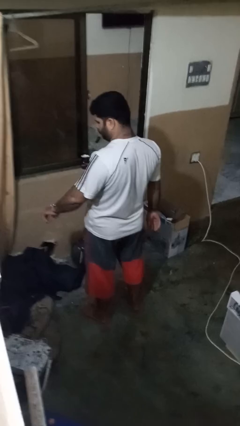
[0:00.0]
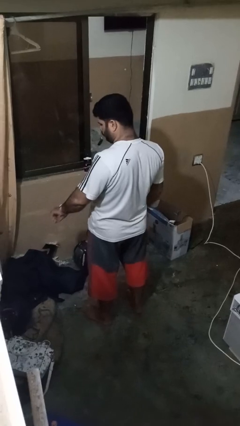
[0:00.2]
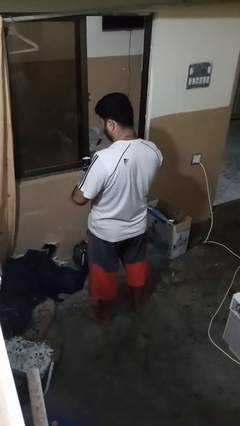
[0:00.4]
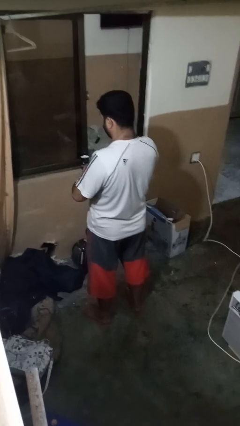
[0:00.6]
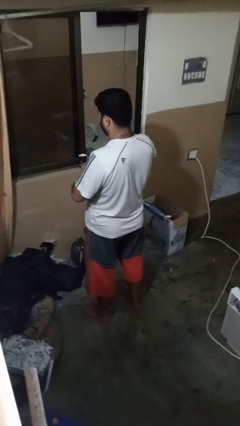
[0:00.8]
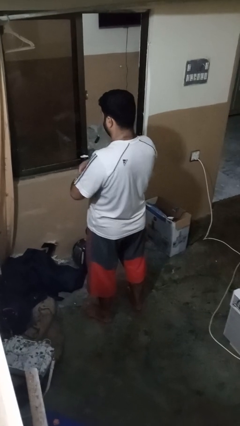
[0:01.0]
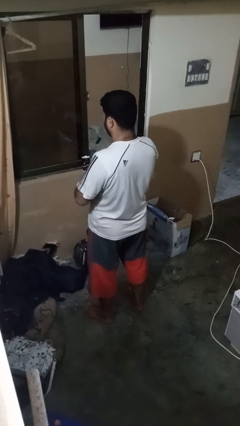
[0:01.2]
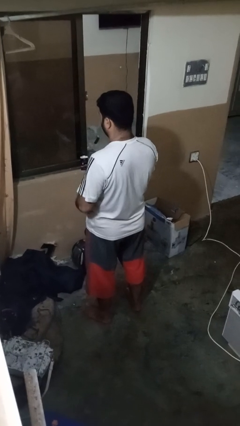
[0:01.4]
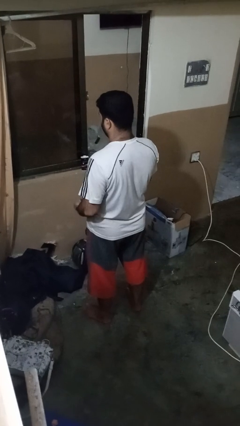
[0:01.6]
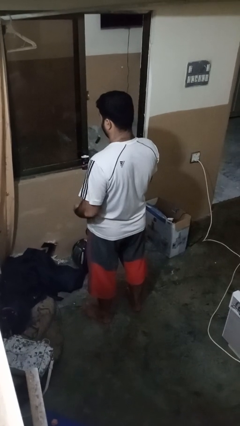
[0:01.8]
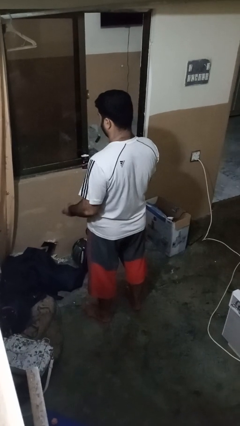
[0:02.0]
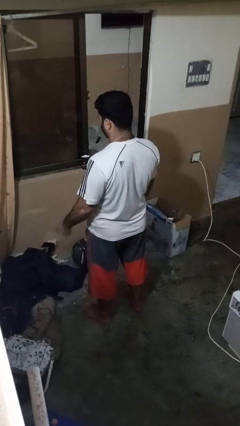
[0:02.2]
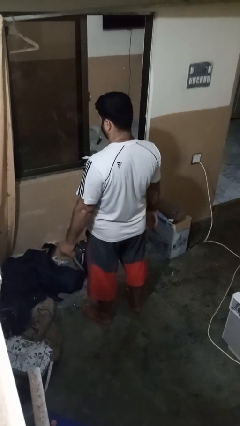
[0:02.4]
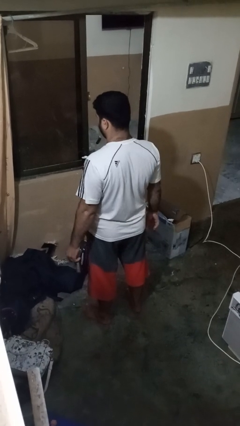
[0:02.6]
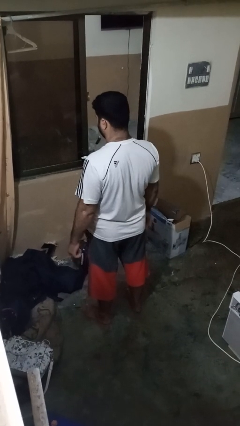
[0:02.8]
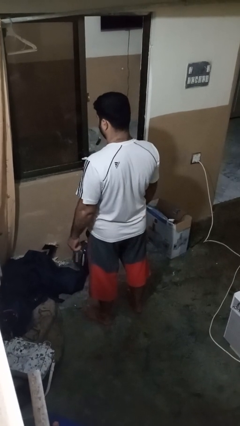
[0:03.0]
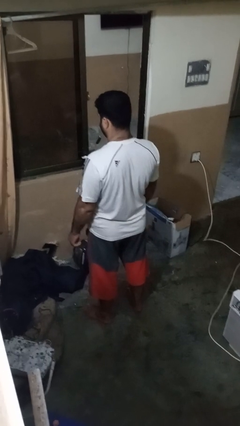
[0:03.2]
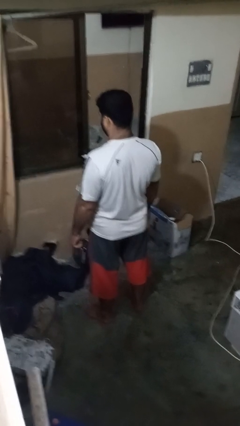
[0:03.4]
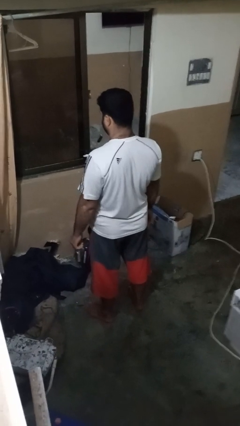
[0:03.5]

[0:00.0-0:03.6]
person takes off wristwatch

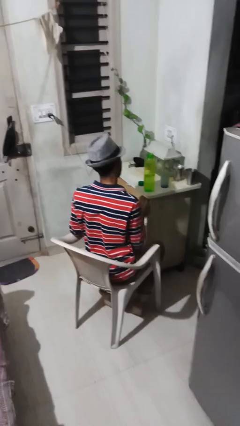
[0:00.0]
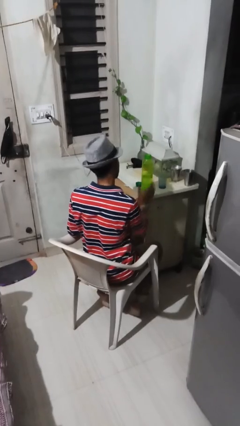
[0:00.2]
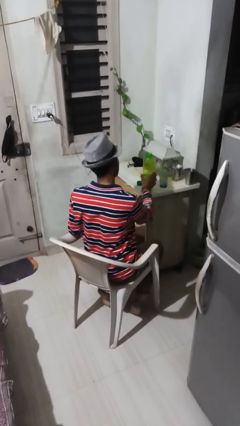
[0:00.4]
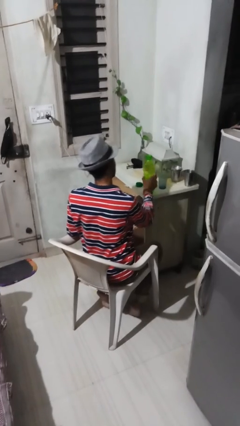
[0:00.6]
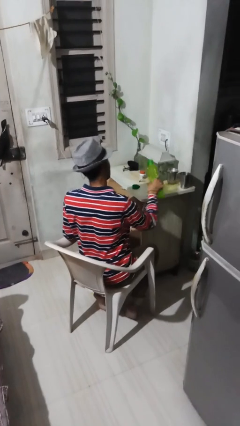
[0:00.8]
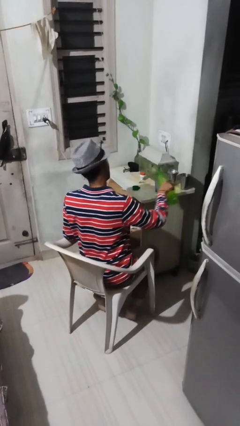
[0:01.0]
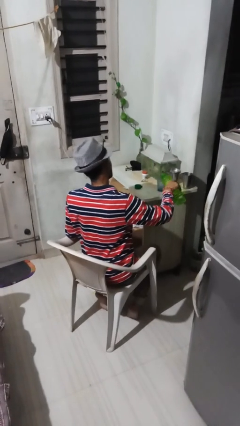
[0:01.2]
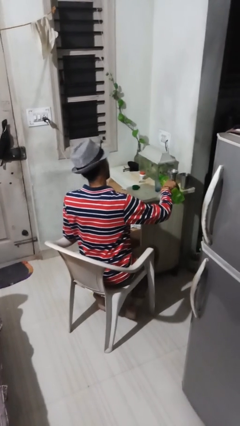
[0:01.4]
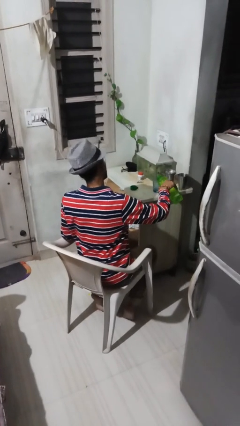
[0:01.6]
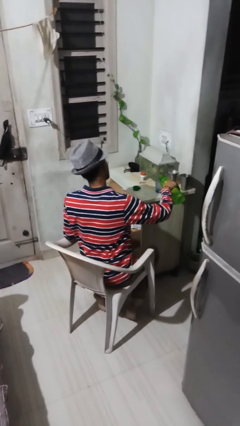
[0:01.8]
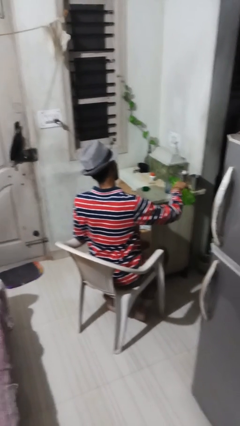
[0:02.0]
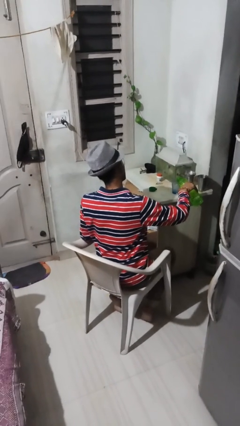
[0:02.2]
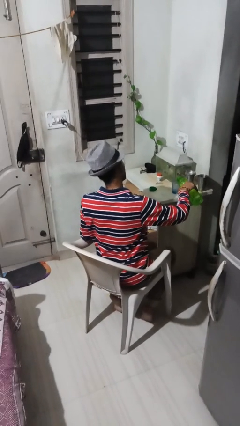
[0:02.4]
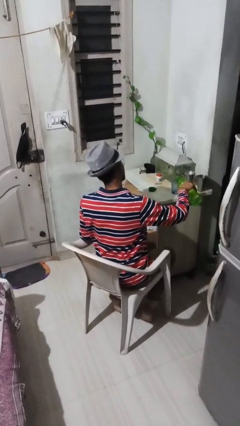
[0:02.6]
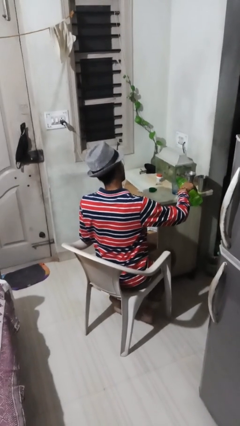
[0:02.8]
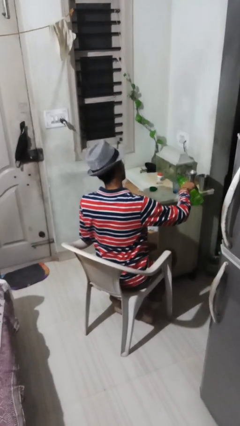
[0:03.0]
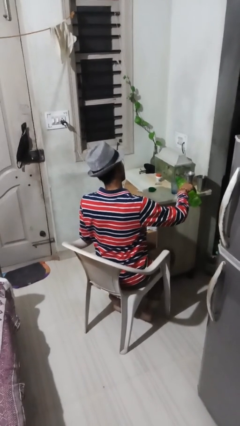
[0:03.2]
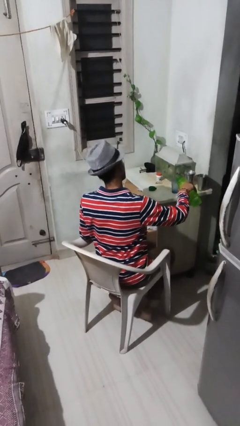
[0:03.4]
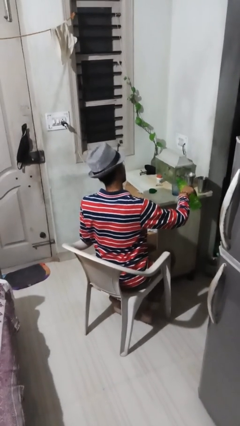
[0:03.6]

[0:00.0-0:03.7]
person pours liquid into cup

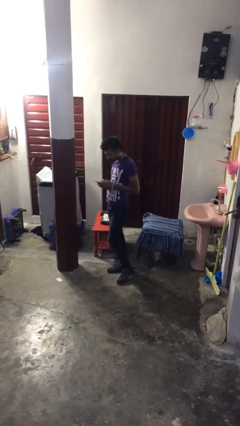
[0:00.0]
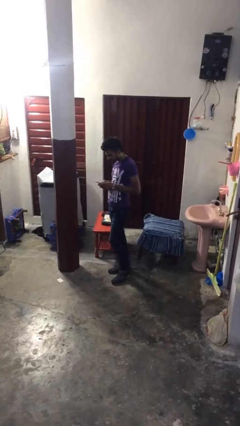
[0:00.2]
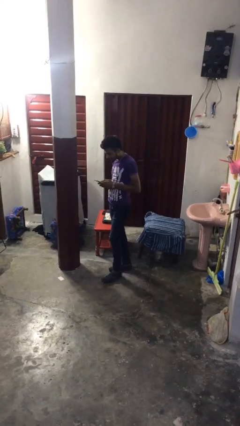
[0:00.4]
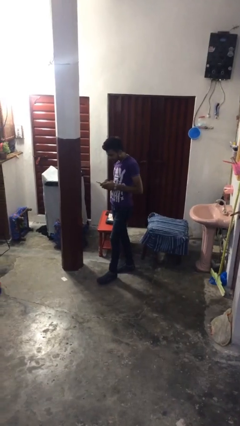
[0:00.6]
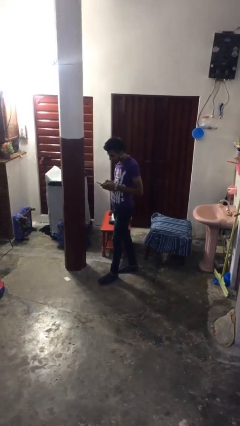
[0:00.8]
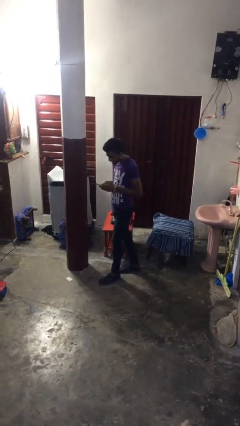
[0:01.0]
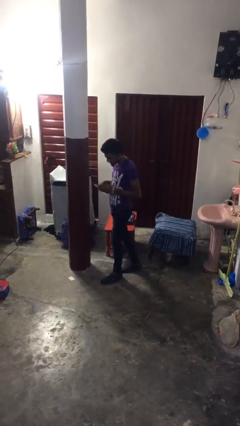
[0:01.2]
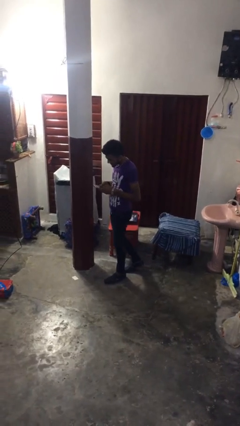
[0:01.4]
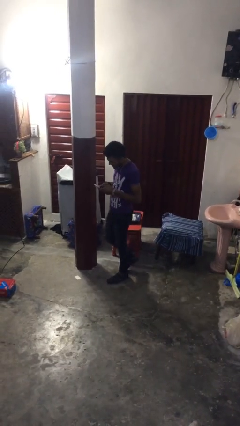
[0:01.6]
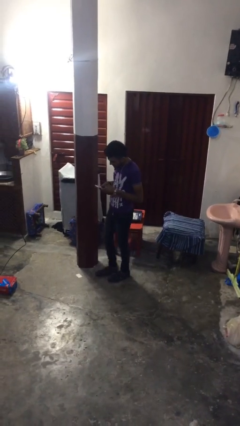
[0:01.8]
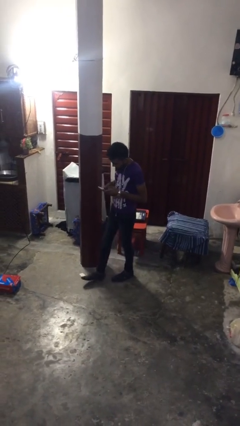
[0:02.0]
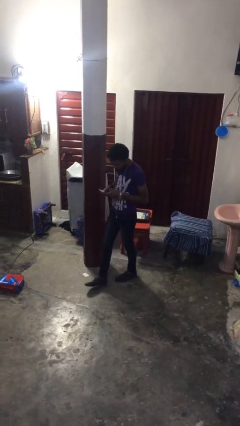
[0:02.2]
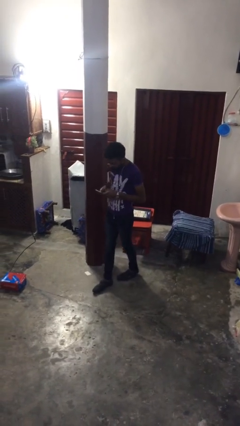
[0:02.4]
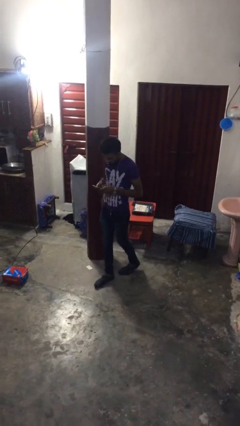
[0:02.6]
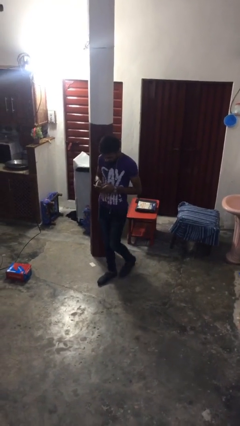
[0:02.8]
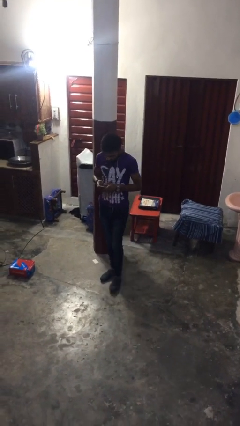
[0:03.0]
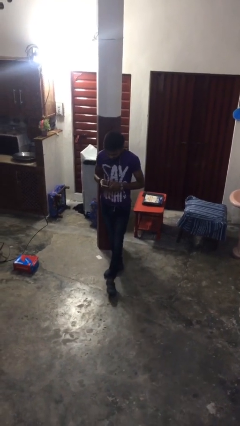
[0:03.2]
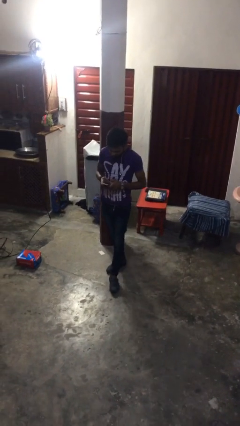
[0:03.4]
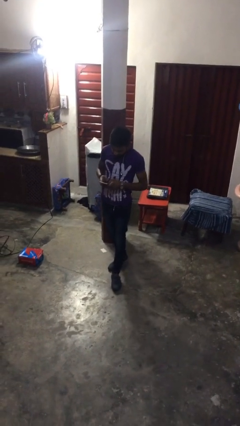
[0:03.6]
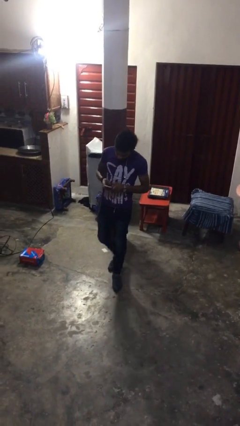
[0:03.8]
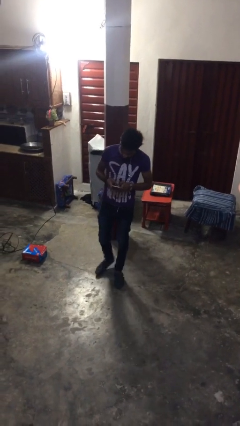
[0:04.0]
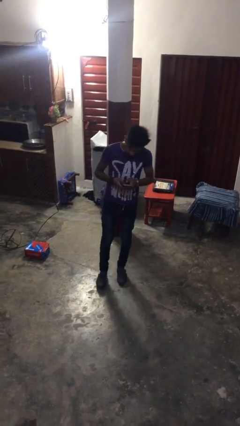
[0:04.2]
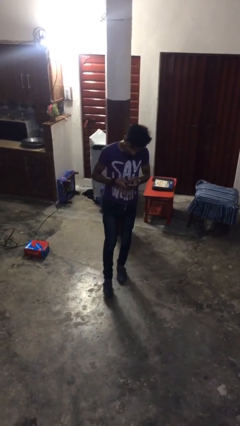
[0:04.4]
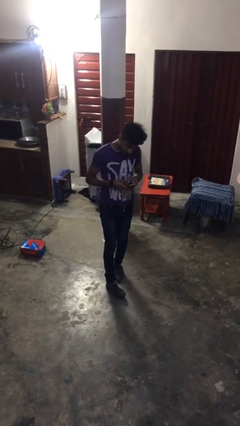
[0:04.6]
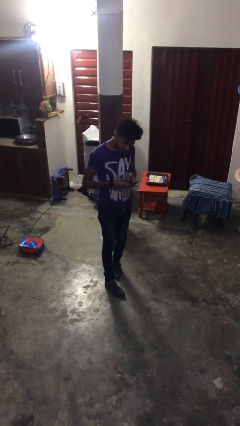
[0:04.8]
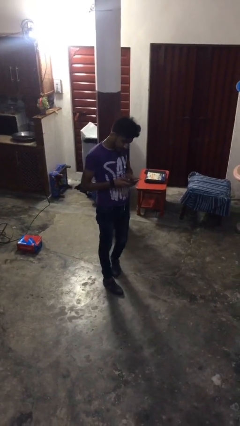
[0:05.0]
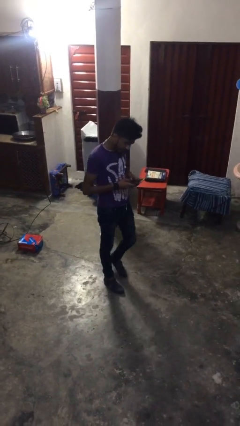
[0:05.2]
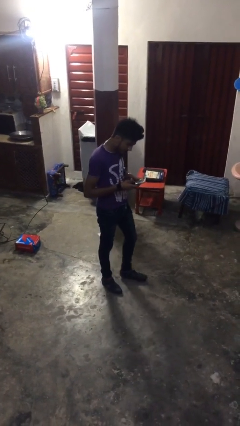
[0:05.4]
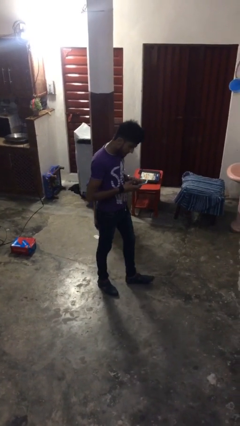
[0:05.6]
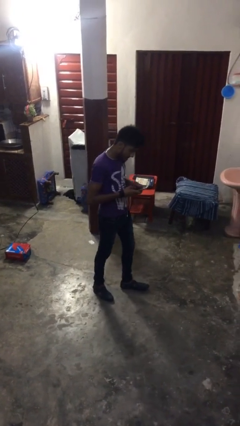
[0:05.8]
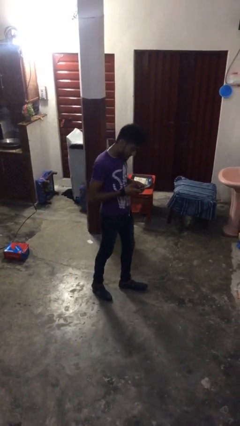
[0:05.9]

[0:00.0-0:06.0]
person texts on phone

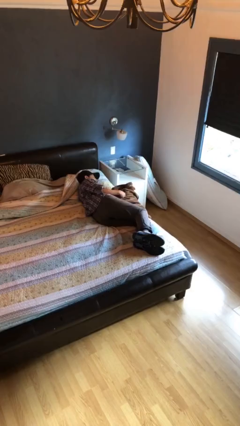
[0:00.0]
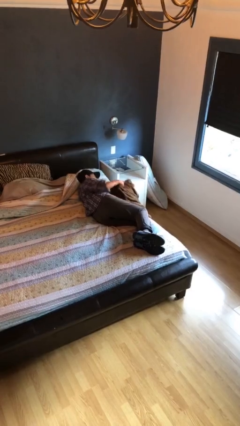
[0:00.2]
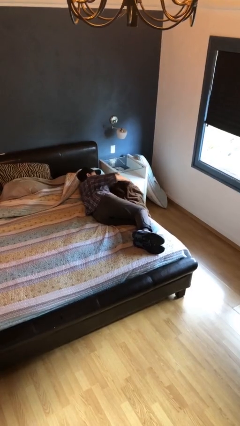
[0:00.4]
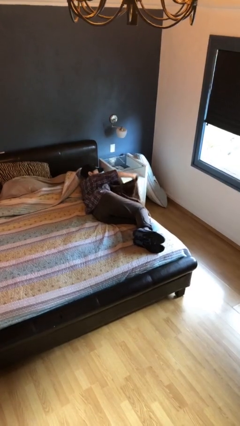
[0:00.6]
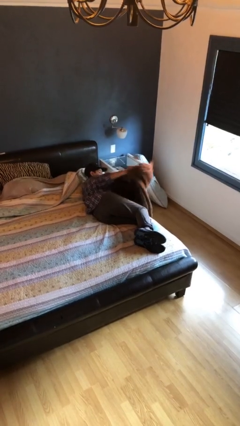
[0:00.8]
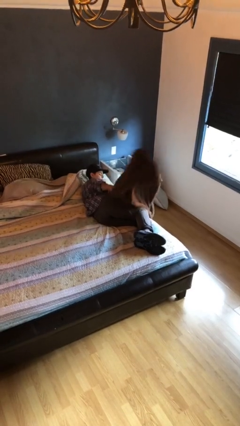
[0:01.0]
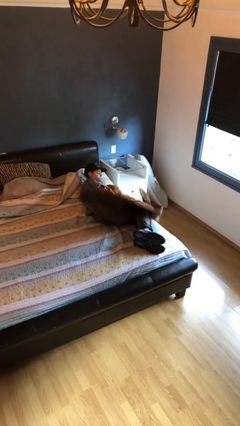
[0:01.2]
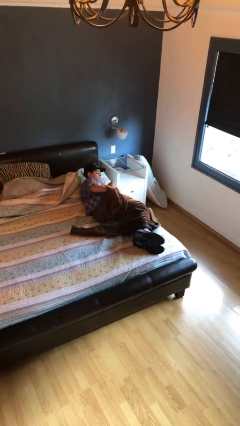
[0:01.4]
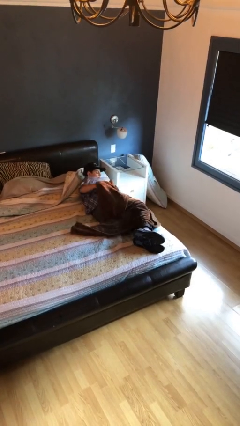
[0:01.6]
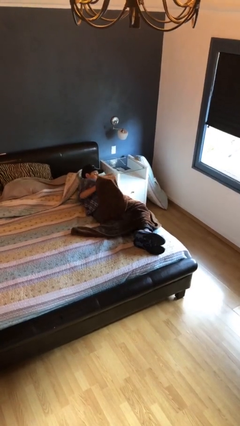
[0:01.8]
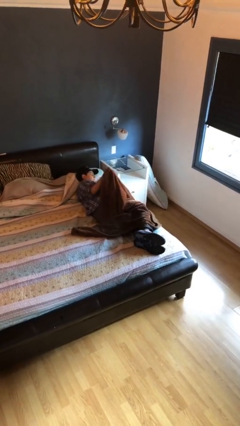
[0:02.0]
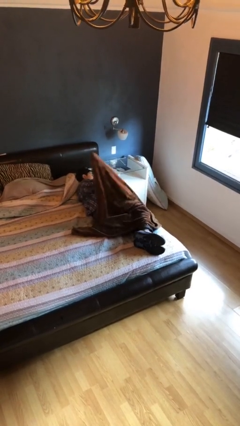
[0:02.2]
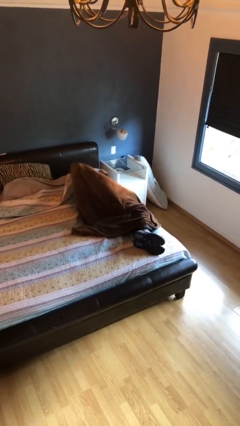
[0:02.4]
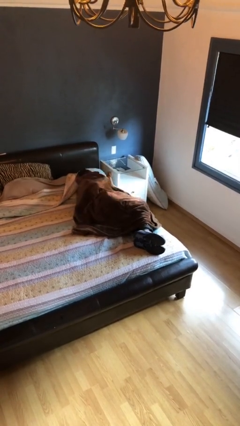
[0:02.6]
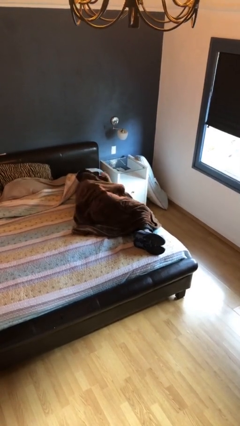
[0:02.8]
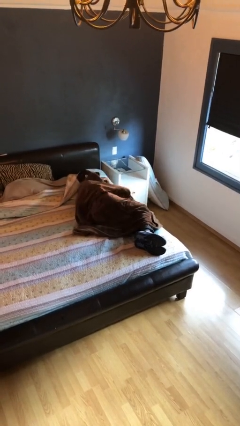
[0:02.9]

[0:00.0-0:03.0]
person covers with blanket

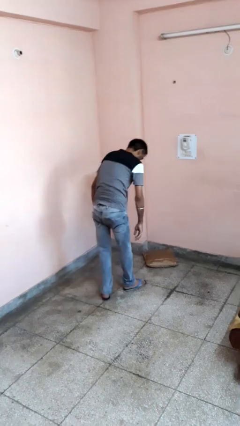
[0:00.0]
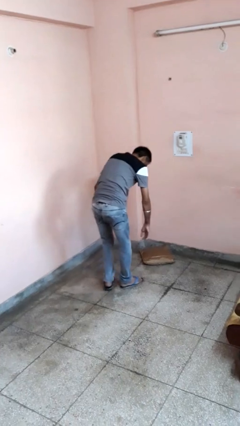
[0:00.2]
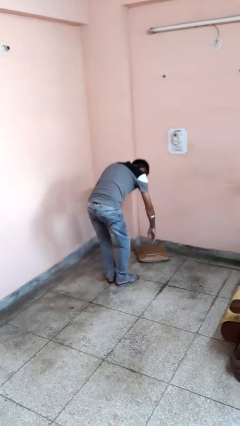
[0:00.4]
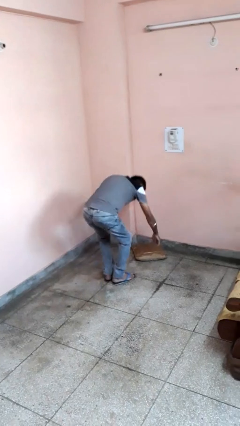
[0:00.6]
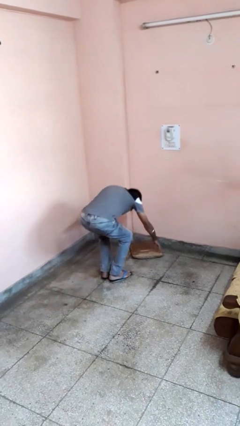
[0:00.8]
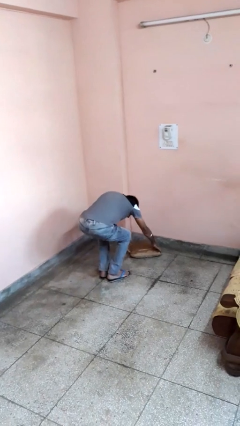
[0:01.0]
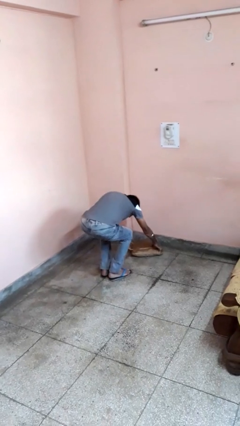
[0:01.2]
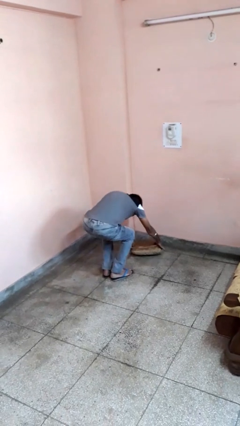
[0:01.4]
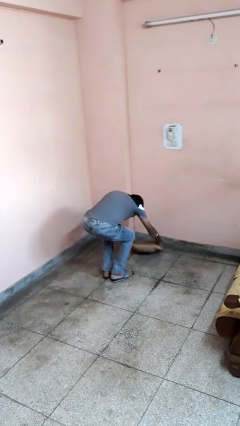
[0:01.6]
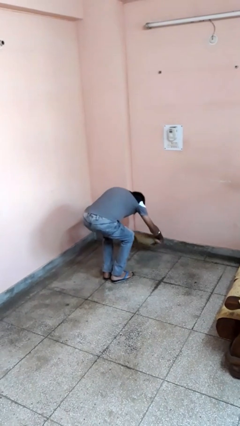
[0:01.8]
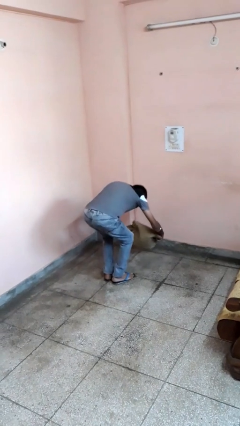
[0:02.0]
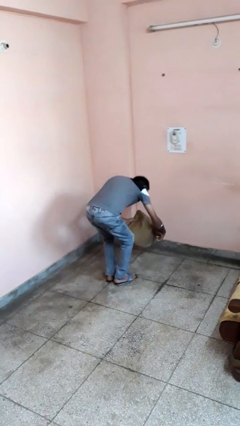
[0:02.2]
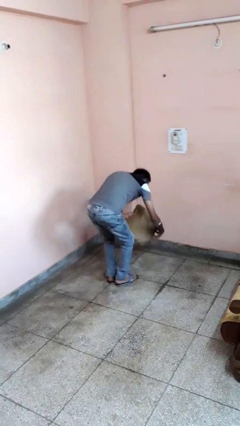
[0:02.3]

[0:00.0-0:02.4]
person picks up object from floor
